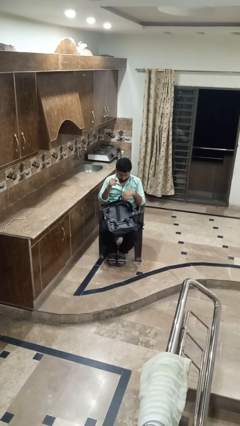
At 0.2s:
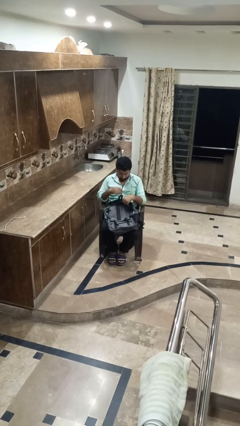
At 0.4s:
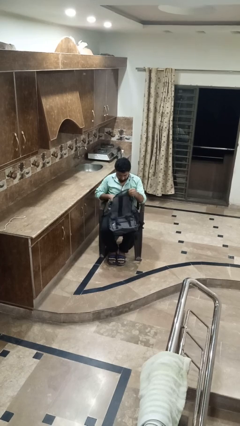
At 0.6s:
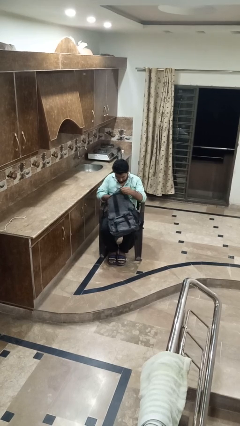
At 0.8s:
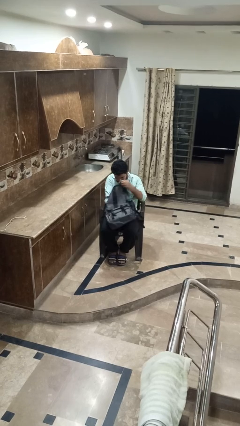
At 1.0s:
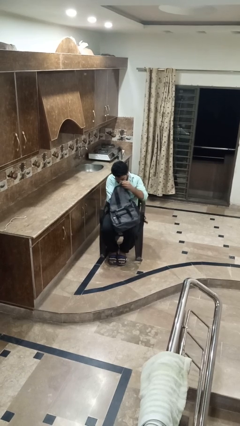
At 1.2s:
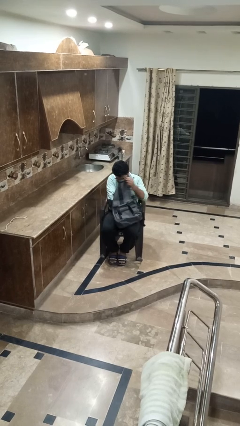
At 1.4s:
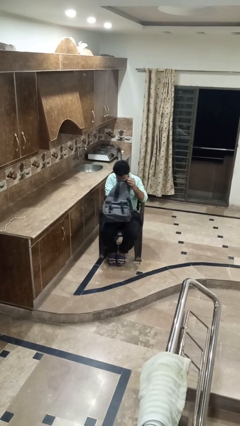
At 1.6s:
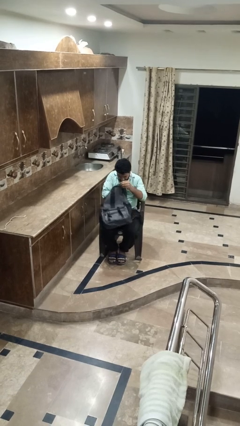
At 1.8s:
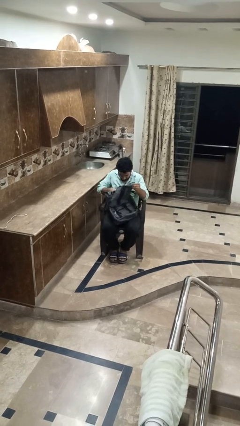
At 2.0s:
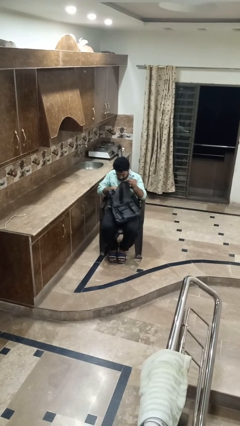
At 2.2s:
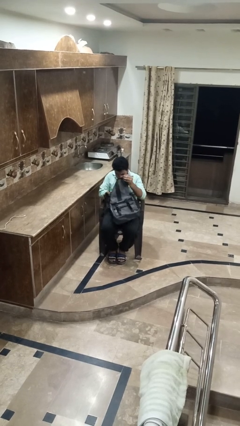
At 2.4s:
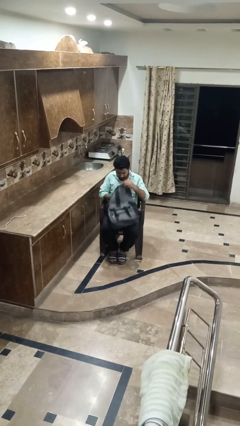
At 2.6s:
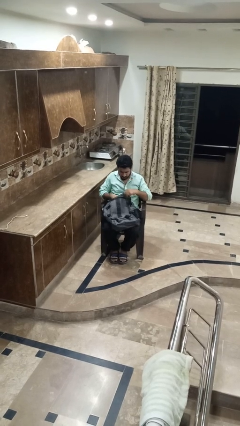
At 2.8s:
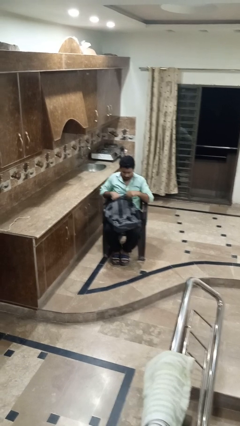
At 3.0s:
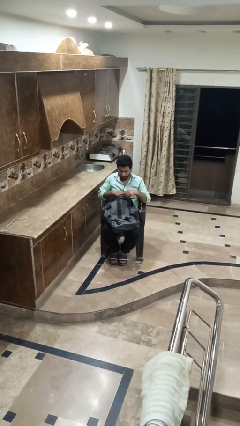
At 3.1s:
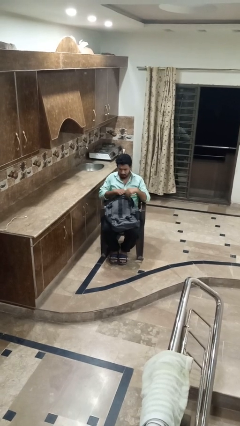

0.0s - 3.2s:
person searches in bag

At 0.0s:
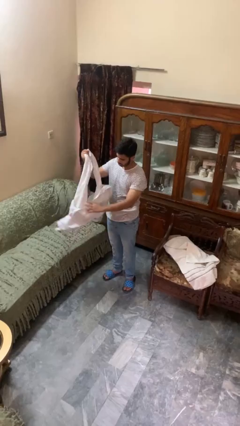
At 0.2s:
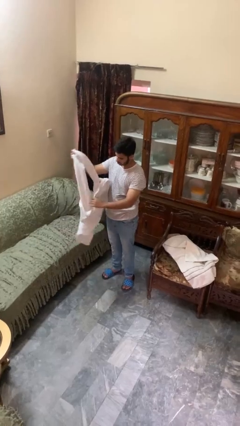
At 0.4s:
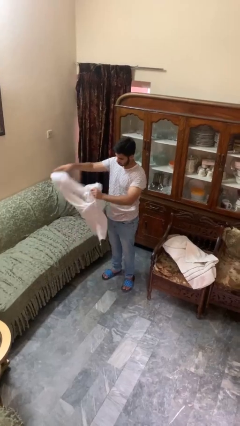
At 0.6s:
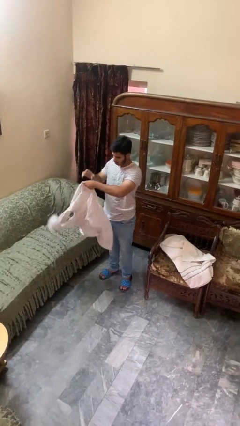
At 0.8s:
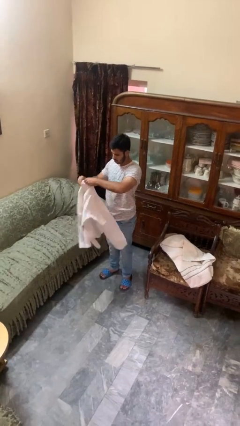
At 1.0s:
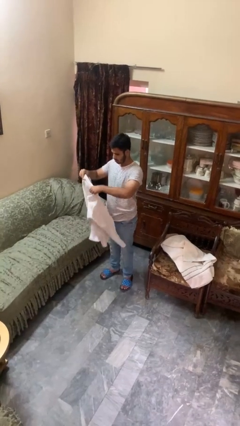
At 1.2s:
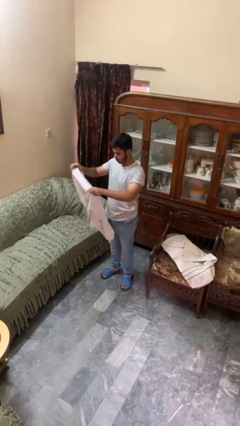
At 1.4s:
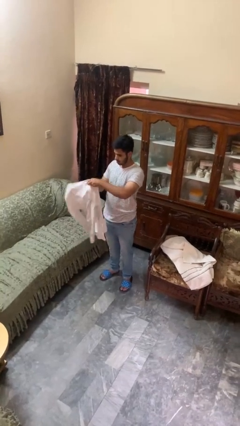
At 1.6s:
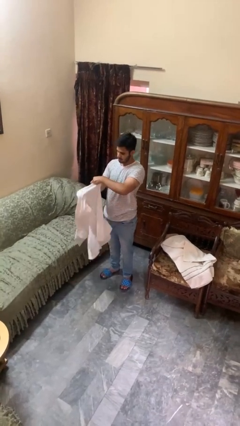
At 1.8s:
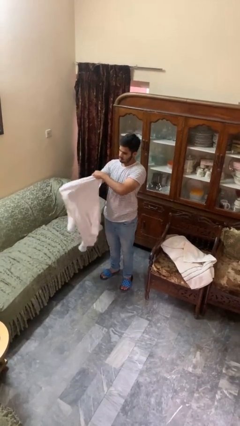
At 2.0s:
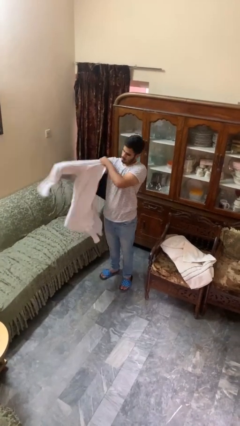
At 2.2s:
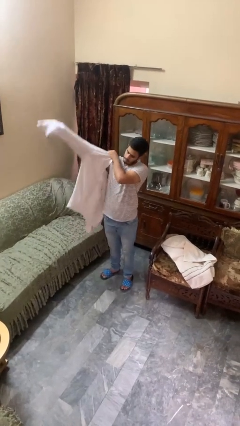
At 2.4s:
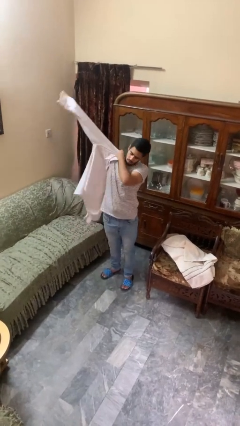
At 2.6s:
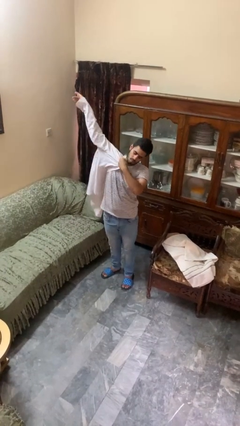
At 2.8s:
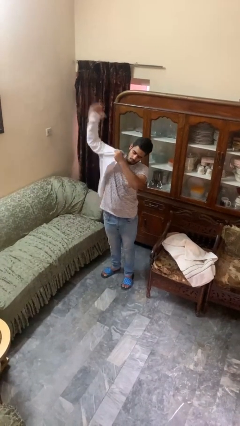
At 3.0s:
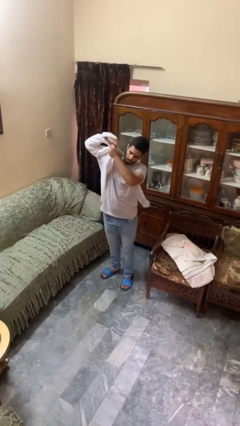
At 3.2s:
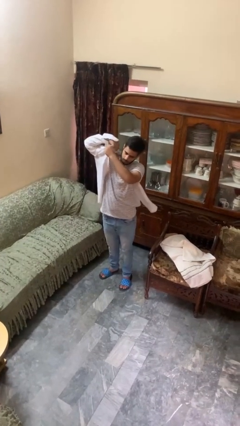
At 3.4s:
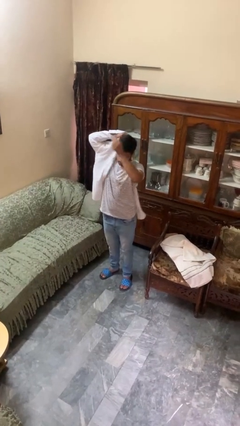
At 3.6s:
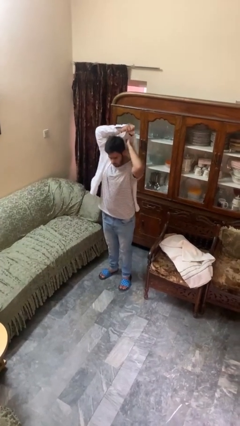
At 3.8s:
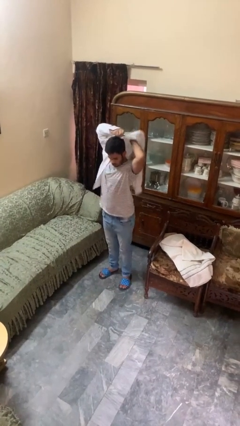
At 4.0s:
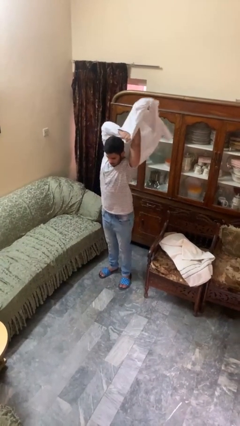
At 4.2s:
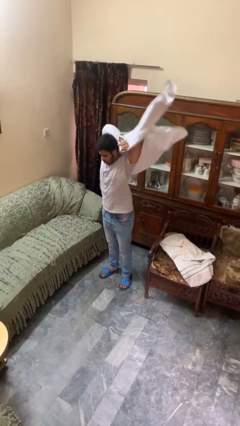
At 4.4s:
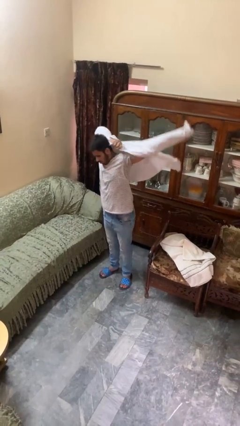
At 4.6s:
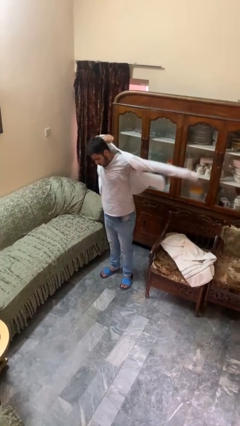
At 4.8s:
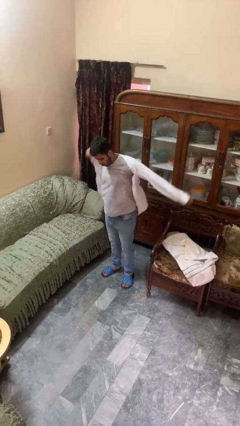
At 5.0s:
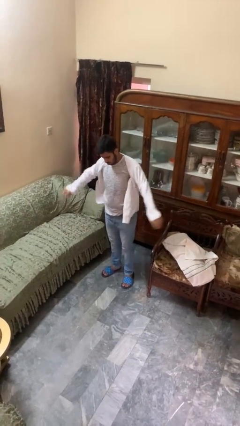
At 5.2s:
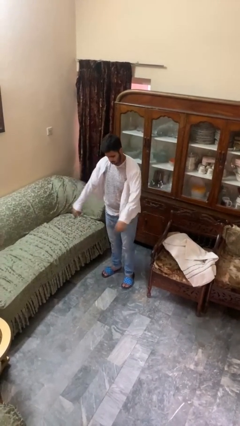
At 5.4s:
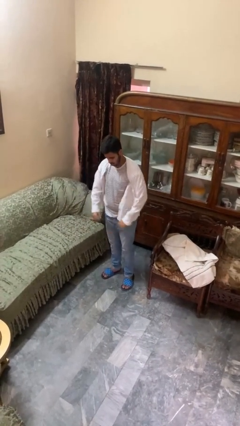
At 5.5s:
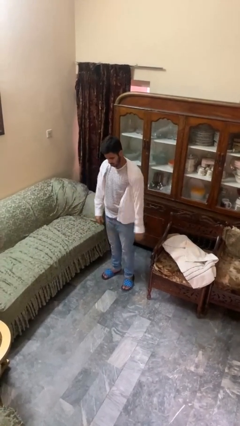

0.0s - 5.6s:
person puts on shirt

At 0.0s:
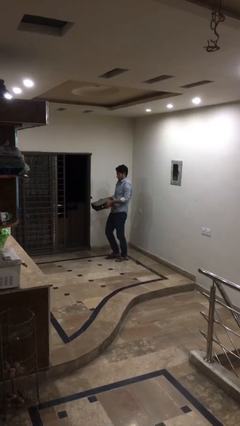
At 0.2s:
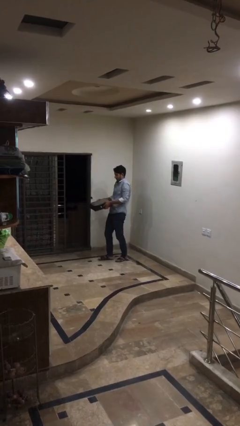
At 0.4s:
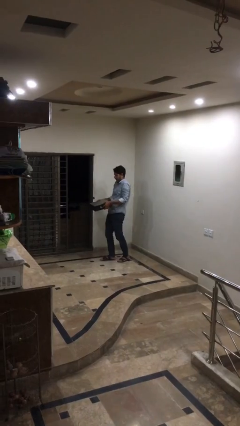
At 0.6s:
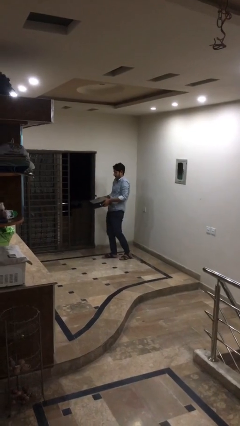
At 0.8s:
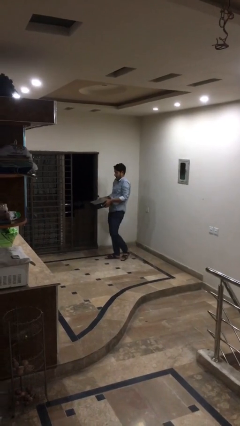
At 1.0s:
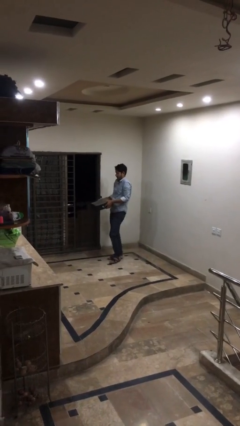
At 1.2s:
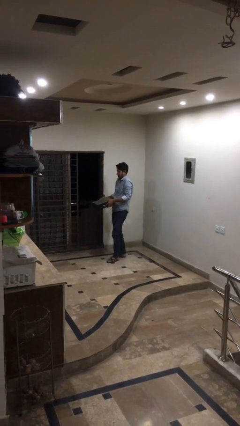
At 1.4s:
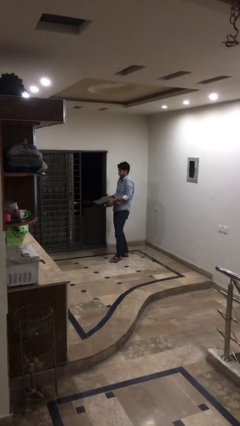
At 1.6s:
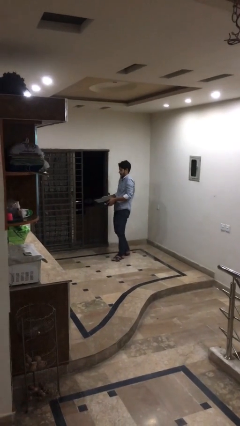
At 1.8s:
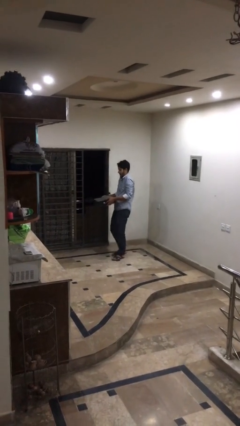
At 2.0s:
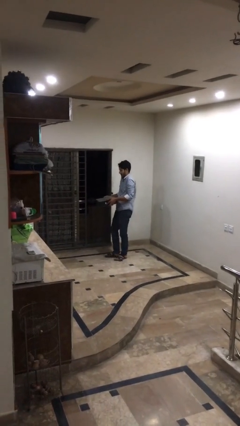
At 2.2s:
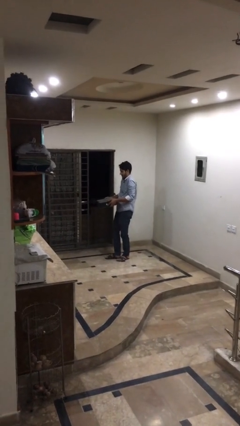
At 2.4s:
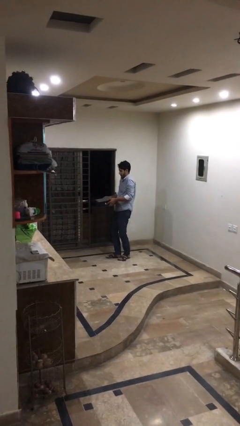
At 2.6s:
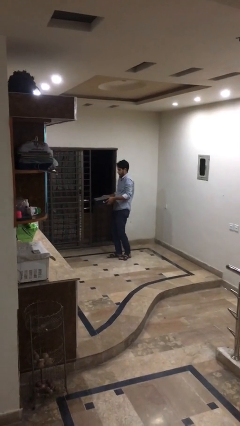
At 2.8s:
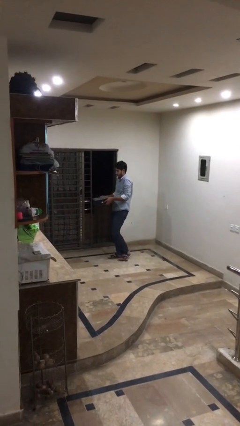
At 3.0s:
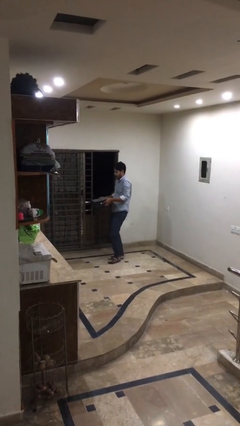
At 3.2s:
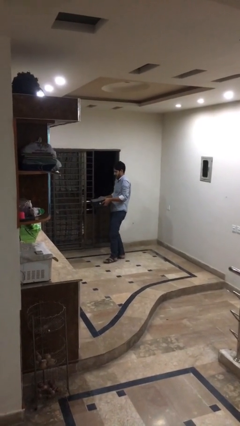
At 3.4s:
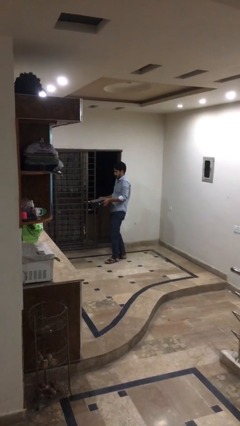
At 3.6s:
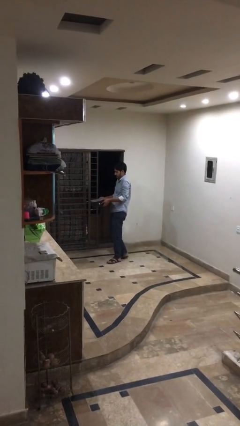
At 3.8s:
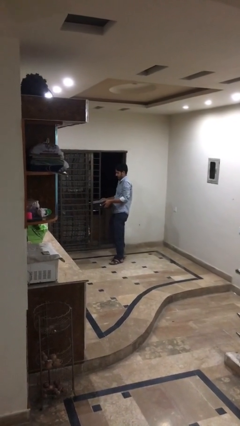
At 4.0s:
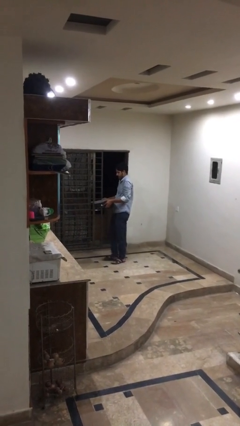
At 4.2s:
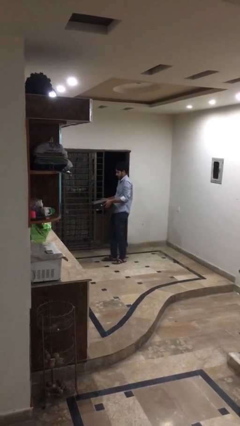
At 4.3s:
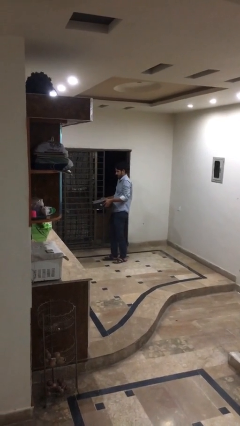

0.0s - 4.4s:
person carries heavy object

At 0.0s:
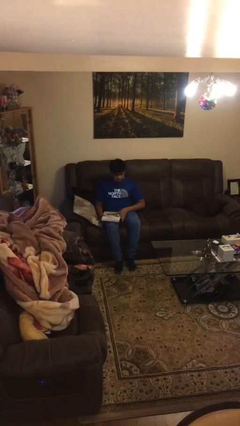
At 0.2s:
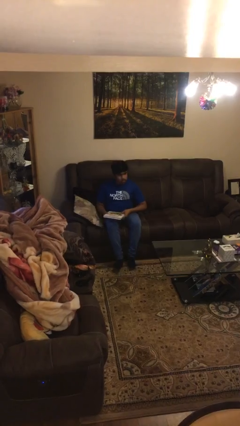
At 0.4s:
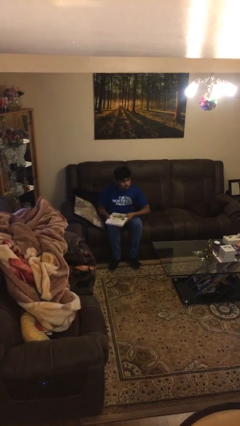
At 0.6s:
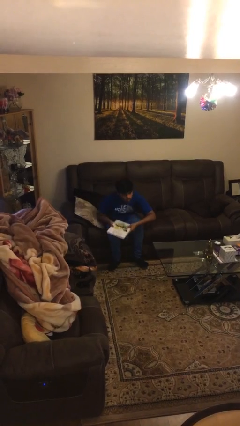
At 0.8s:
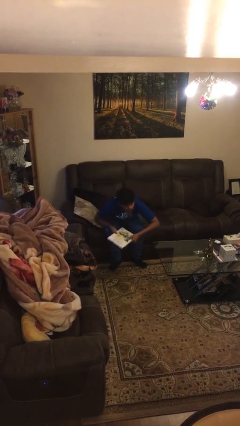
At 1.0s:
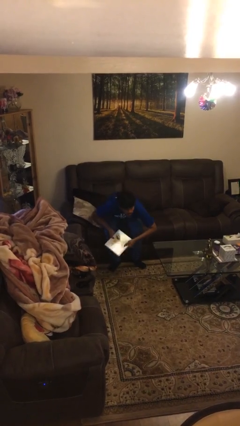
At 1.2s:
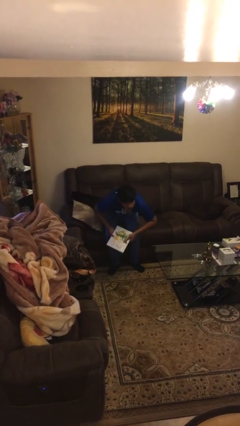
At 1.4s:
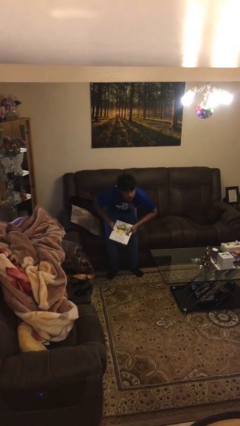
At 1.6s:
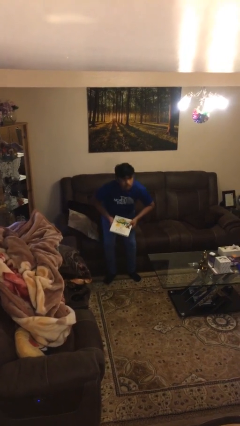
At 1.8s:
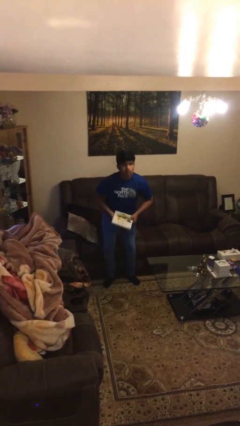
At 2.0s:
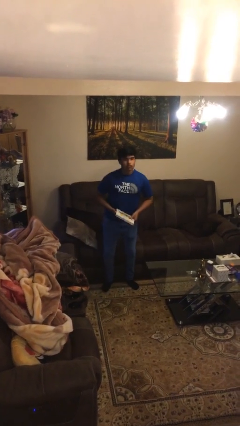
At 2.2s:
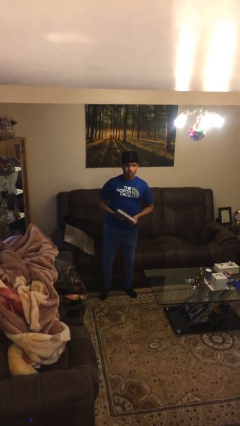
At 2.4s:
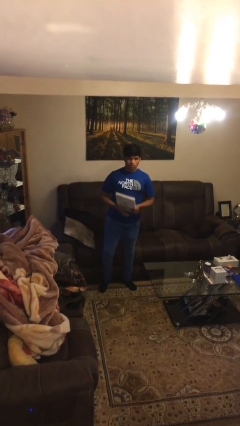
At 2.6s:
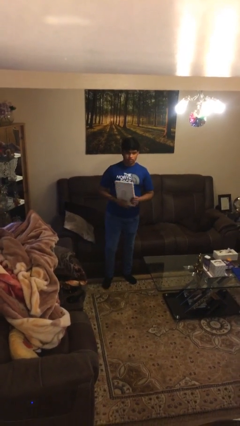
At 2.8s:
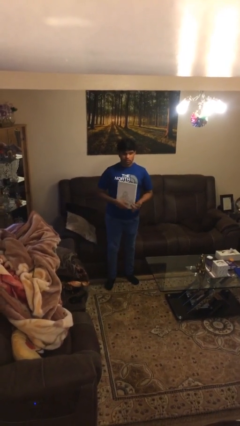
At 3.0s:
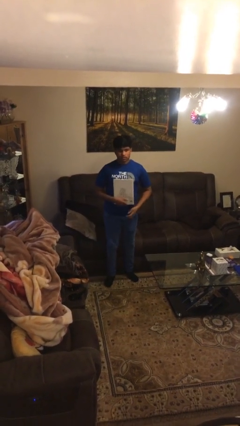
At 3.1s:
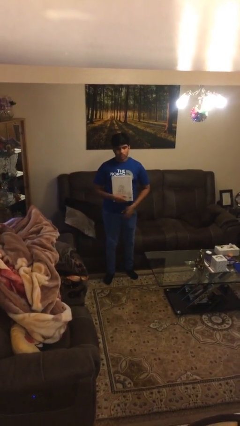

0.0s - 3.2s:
person stands up

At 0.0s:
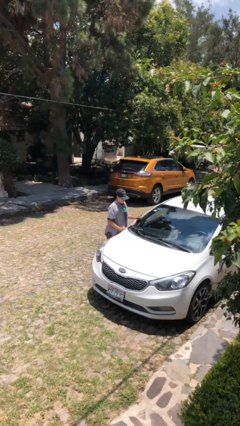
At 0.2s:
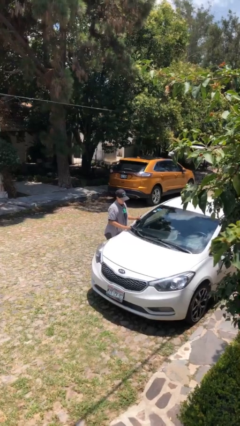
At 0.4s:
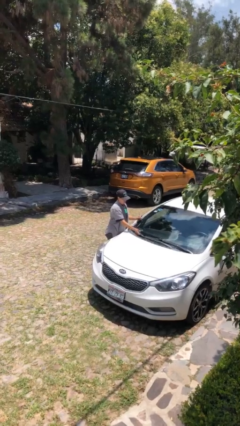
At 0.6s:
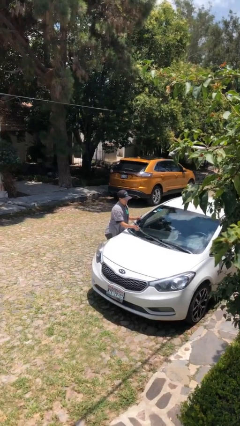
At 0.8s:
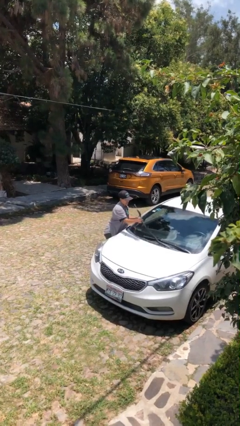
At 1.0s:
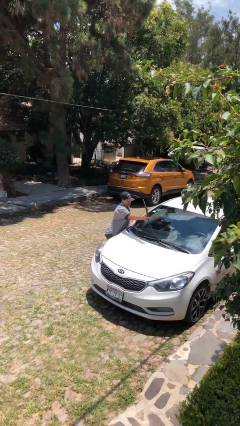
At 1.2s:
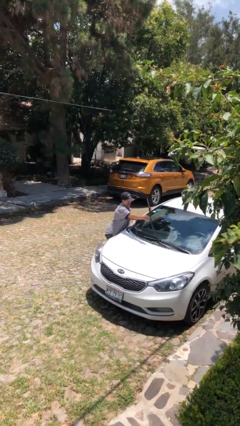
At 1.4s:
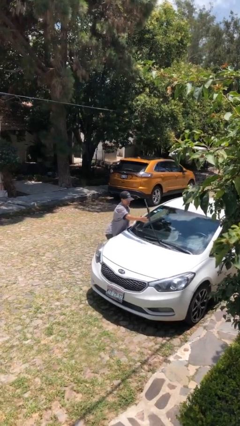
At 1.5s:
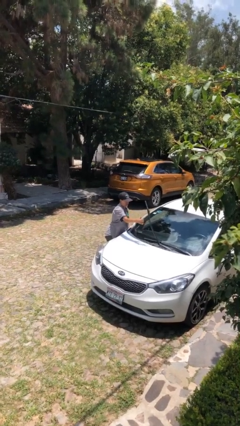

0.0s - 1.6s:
person flips up car wipers
